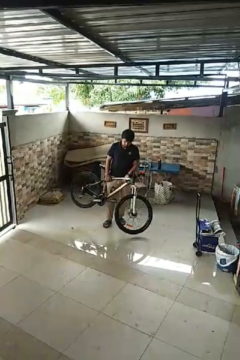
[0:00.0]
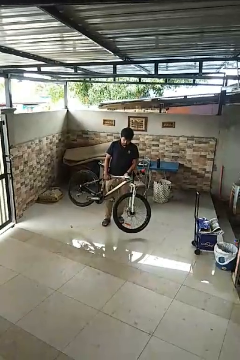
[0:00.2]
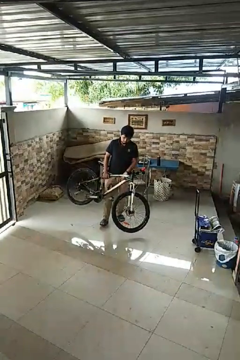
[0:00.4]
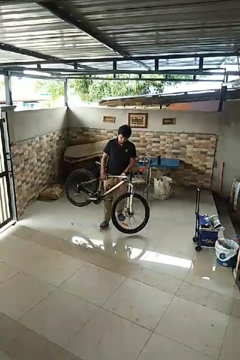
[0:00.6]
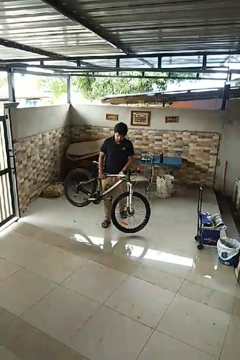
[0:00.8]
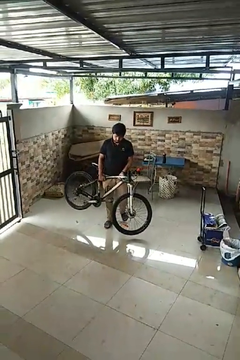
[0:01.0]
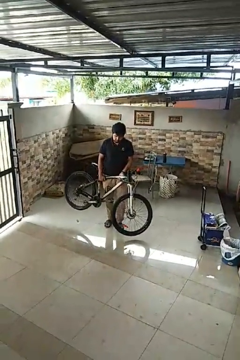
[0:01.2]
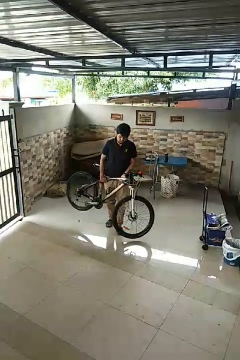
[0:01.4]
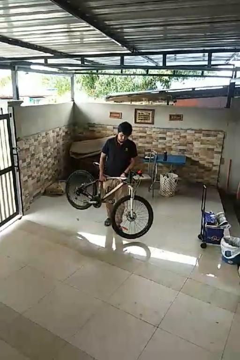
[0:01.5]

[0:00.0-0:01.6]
person carries bicycle

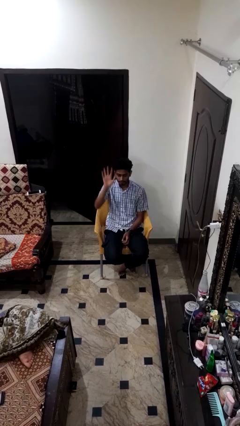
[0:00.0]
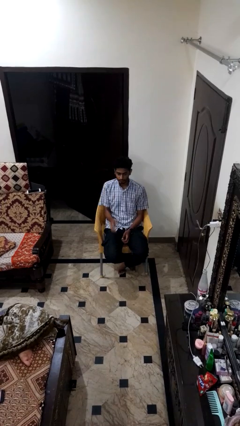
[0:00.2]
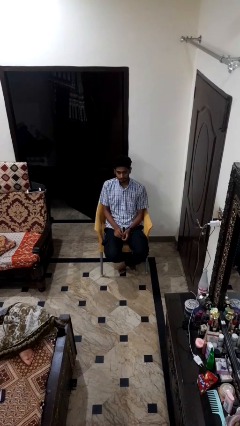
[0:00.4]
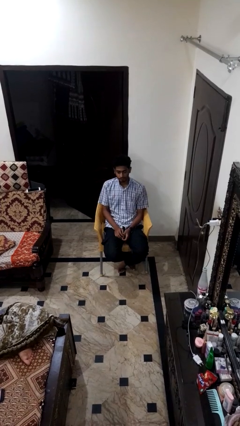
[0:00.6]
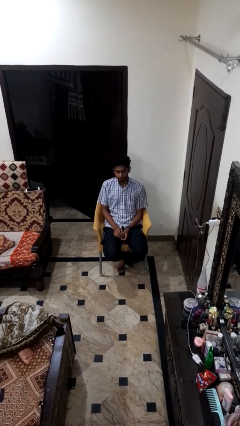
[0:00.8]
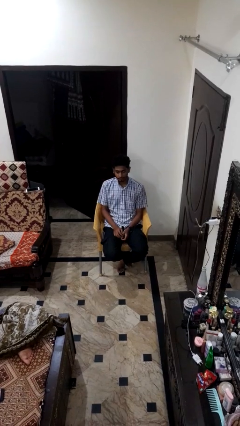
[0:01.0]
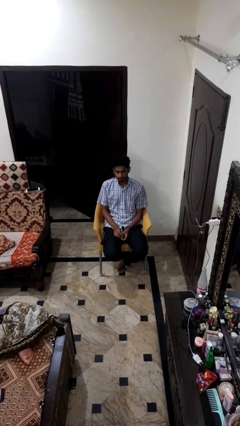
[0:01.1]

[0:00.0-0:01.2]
person gestures lower hand

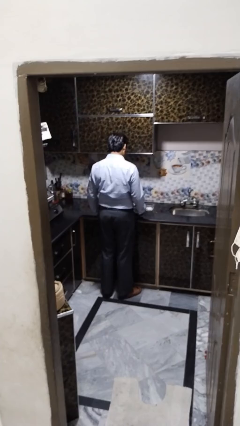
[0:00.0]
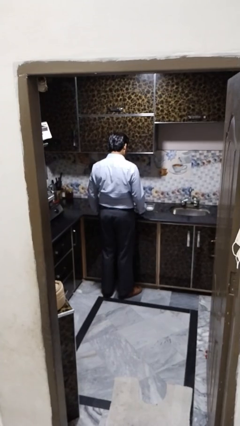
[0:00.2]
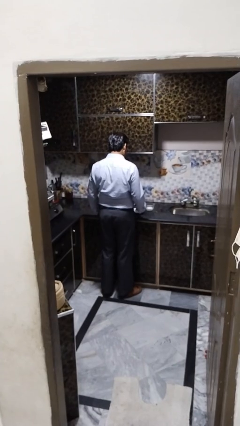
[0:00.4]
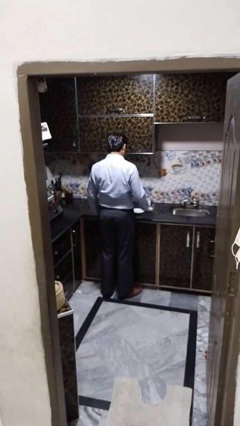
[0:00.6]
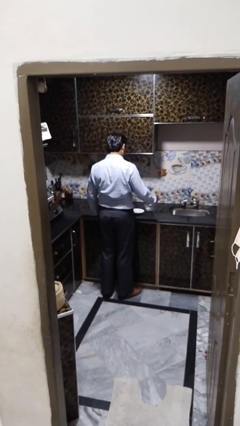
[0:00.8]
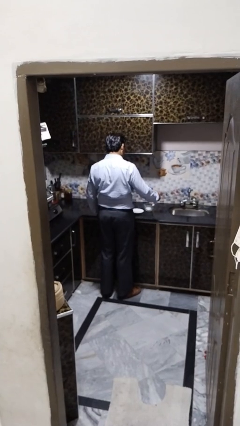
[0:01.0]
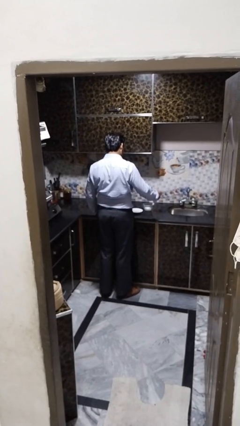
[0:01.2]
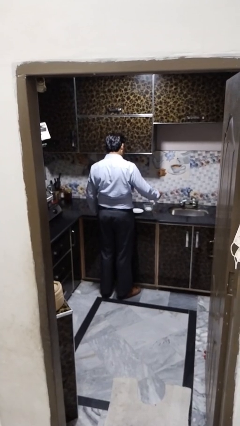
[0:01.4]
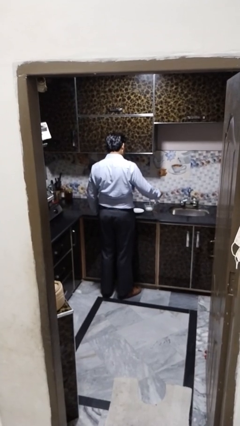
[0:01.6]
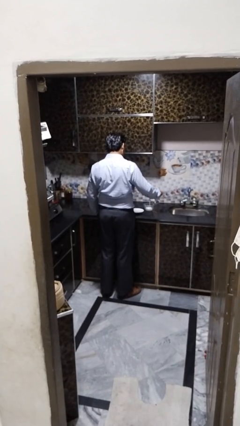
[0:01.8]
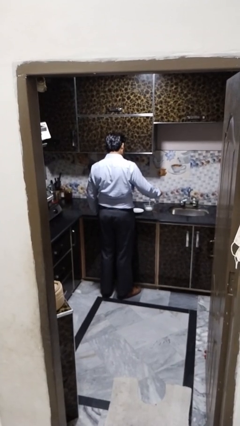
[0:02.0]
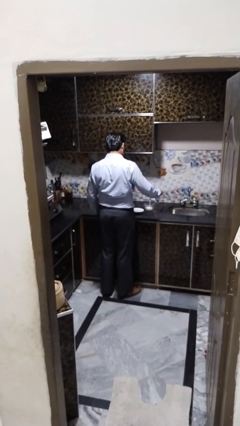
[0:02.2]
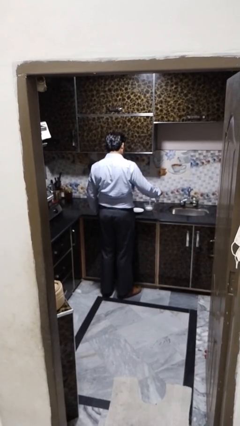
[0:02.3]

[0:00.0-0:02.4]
person pours into bowl

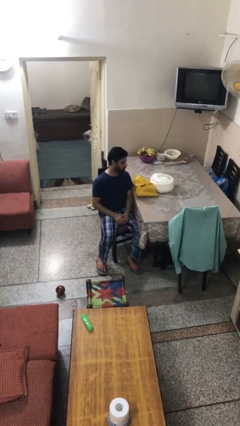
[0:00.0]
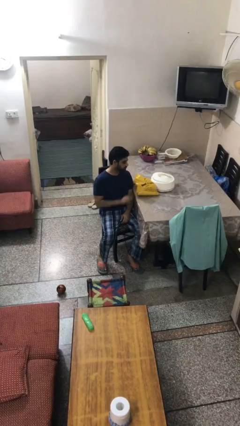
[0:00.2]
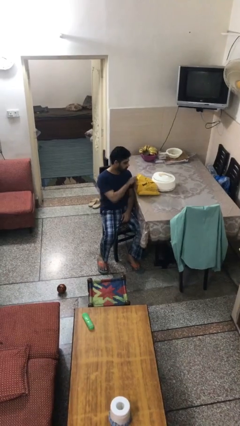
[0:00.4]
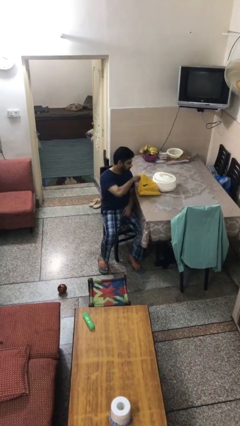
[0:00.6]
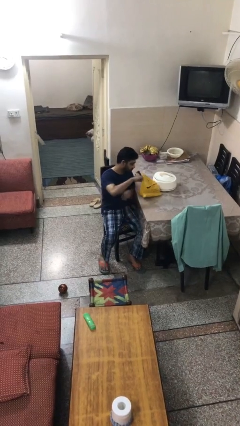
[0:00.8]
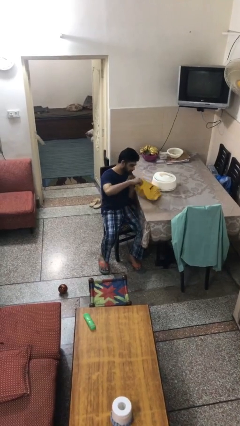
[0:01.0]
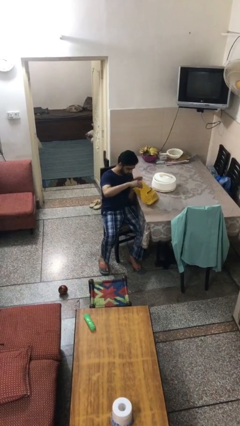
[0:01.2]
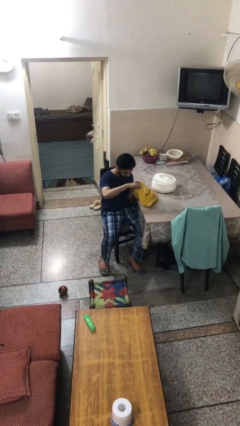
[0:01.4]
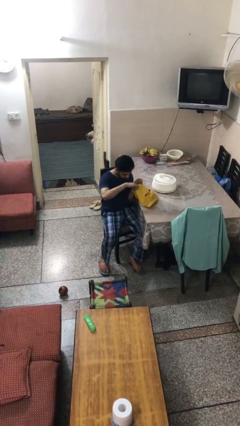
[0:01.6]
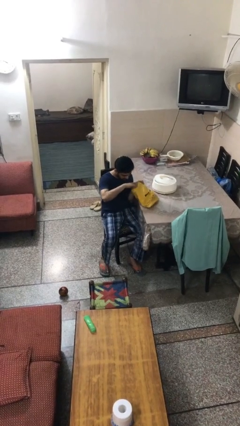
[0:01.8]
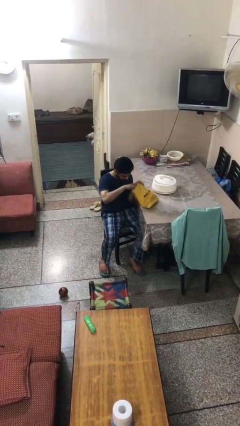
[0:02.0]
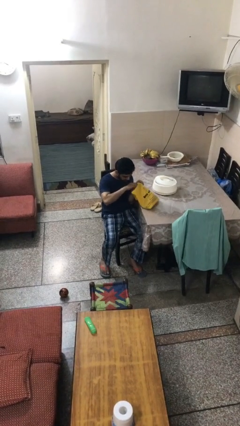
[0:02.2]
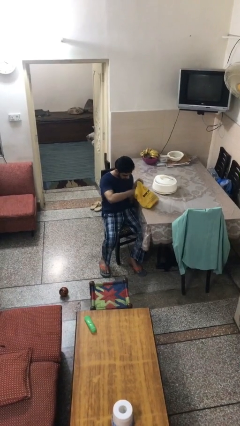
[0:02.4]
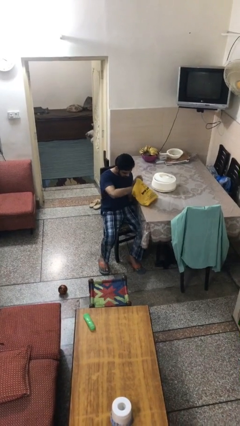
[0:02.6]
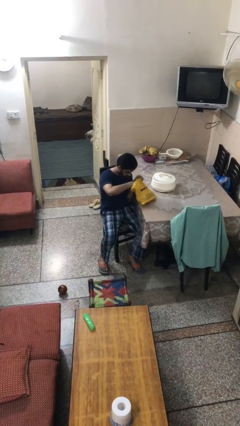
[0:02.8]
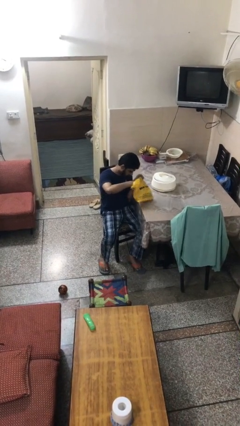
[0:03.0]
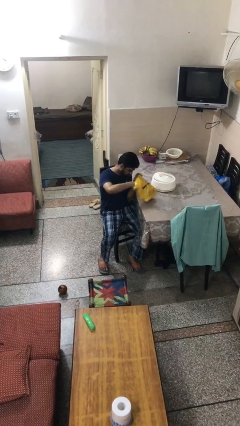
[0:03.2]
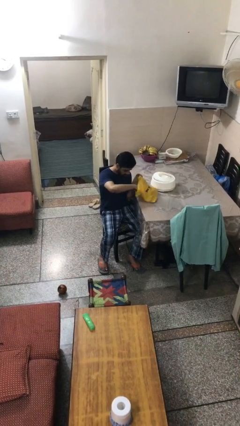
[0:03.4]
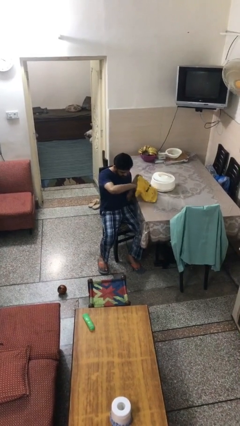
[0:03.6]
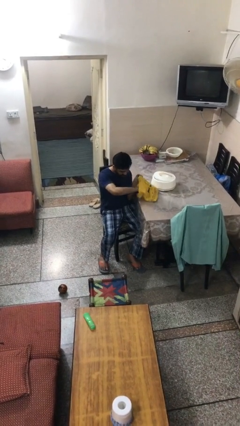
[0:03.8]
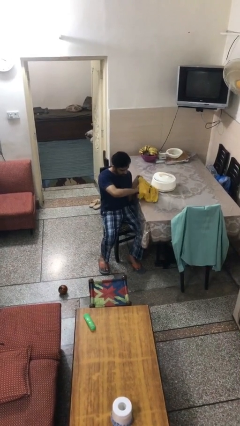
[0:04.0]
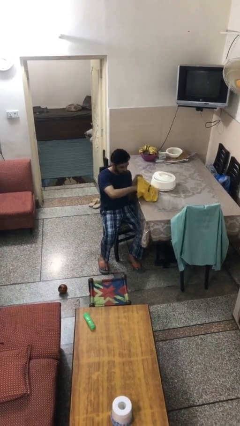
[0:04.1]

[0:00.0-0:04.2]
person searches in bag

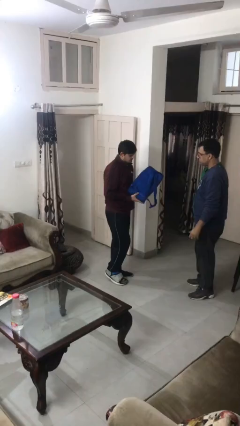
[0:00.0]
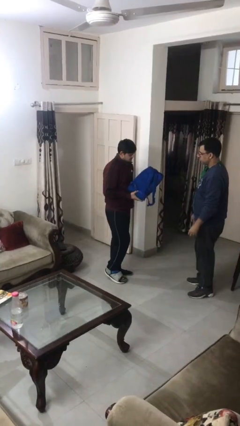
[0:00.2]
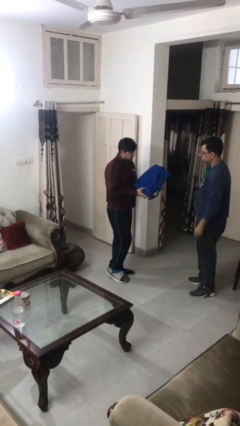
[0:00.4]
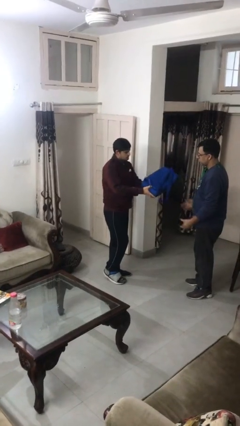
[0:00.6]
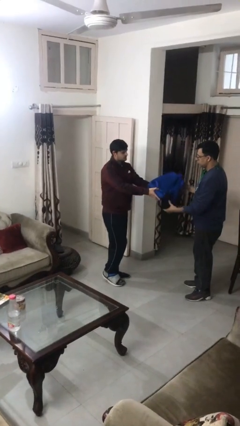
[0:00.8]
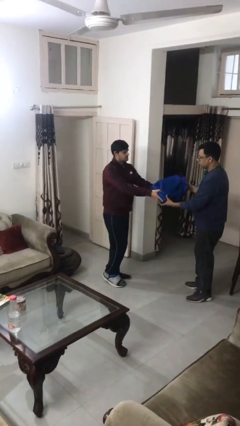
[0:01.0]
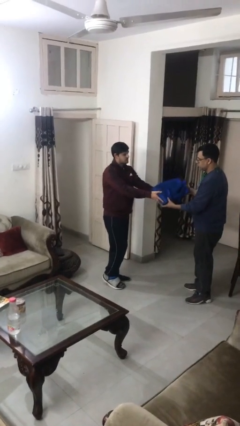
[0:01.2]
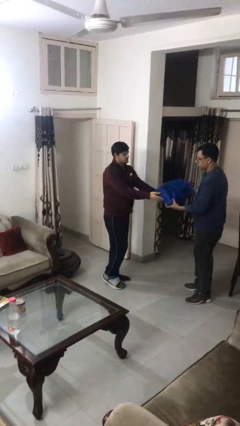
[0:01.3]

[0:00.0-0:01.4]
person transfers object to person

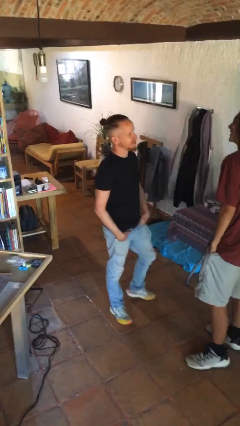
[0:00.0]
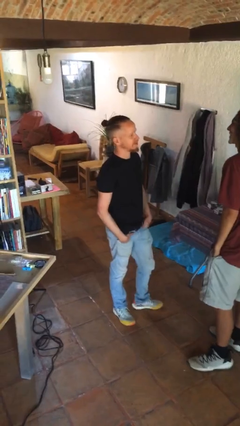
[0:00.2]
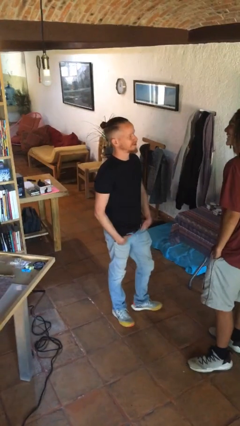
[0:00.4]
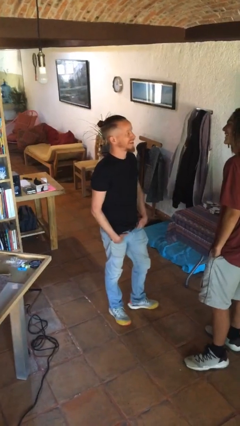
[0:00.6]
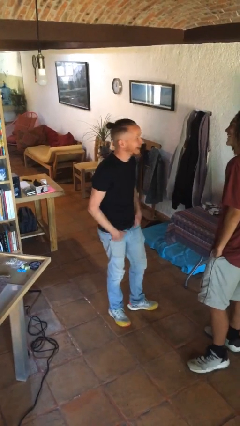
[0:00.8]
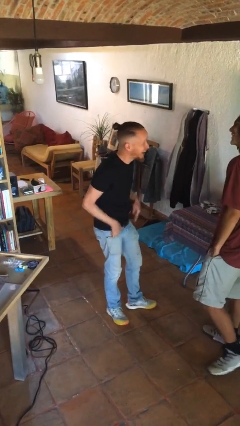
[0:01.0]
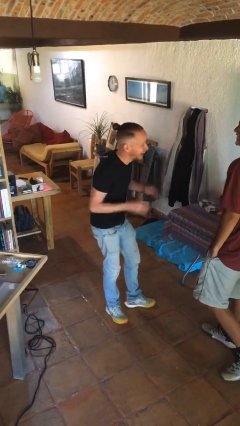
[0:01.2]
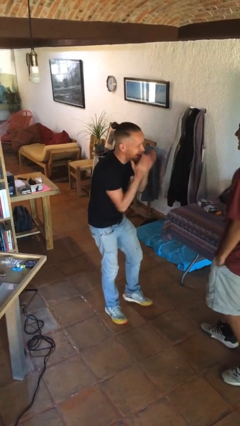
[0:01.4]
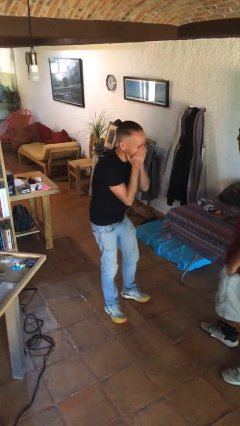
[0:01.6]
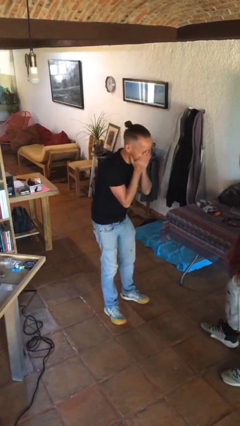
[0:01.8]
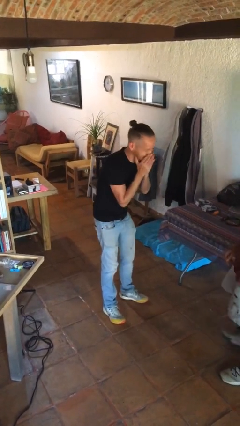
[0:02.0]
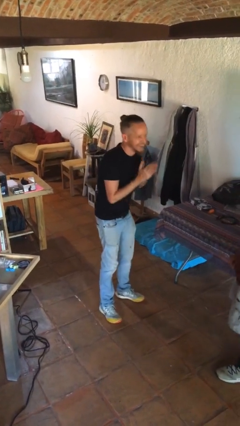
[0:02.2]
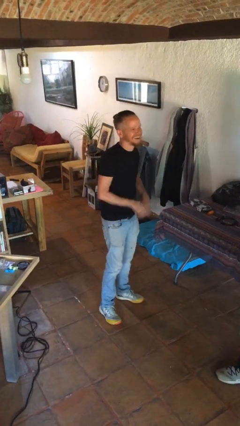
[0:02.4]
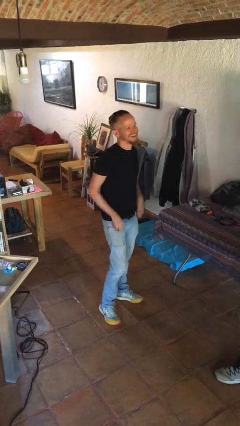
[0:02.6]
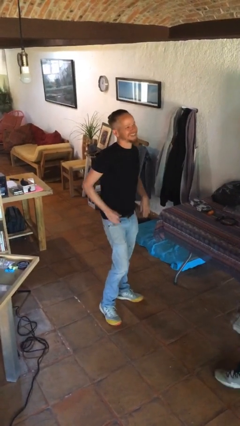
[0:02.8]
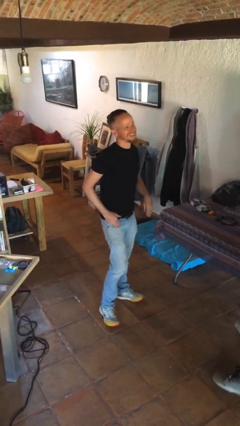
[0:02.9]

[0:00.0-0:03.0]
person laughs with person

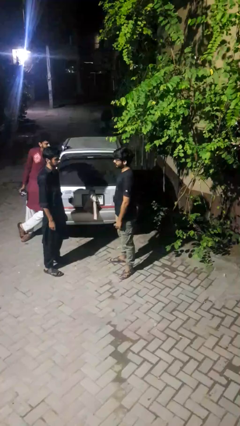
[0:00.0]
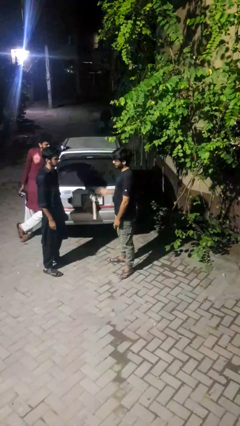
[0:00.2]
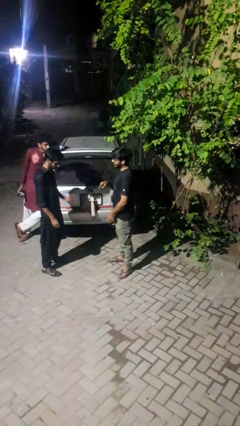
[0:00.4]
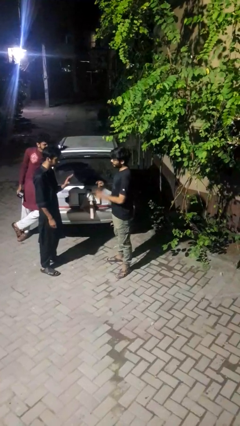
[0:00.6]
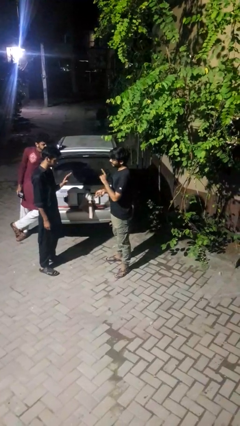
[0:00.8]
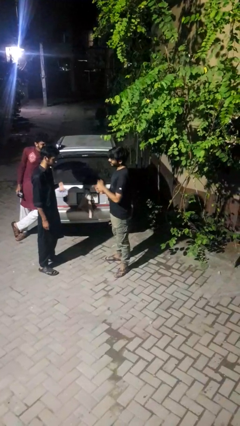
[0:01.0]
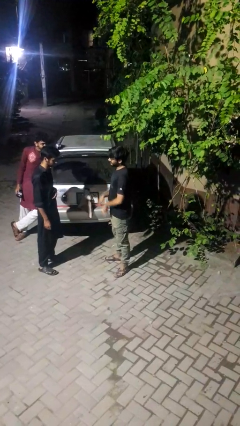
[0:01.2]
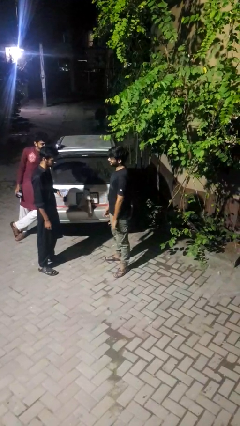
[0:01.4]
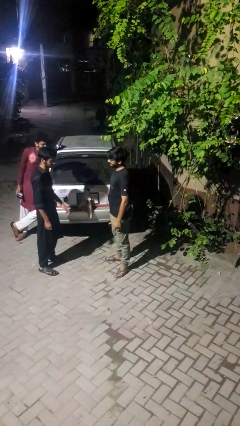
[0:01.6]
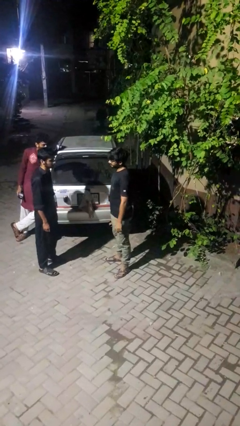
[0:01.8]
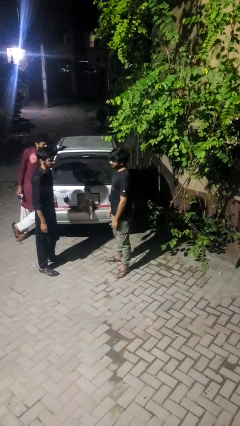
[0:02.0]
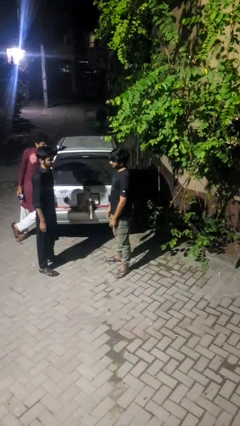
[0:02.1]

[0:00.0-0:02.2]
person talks to person

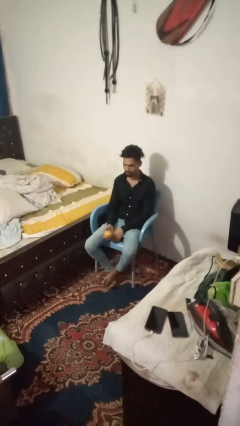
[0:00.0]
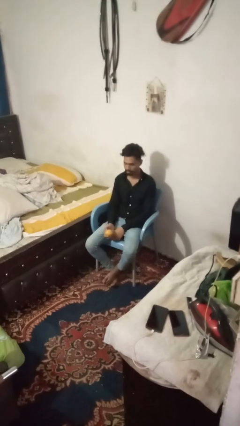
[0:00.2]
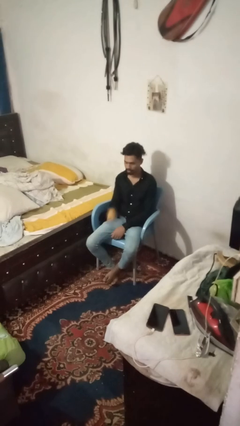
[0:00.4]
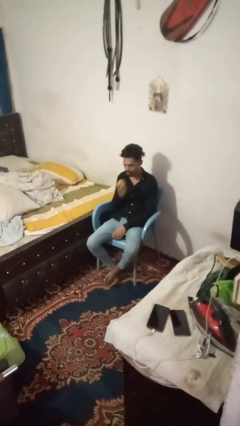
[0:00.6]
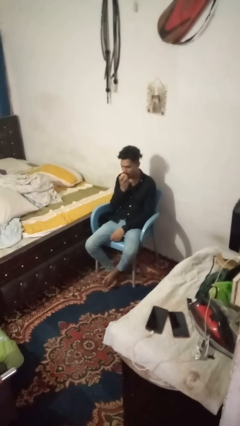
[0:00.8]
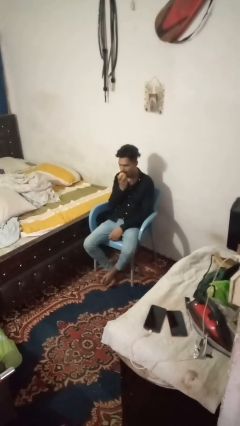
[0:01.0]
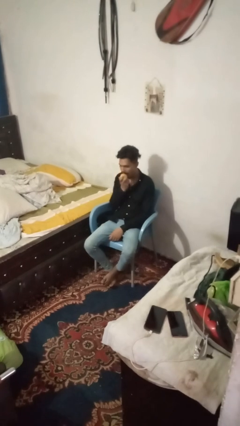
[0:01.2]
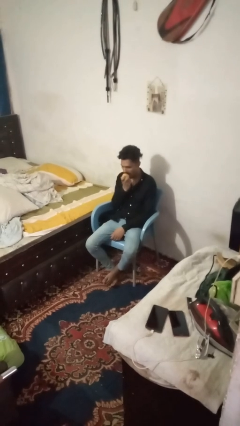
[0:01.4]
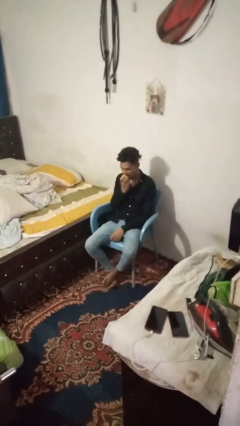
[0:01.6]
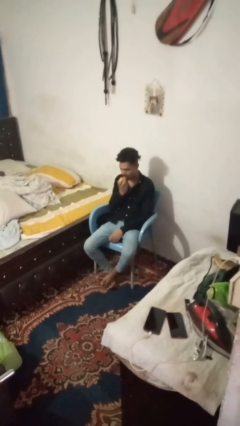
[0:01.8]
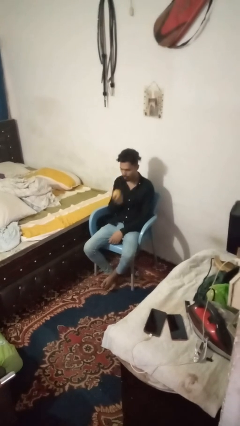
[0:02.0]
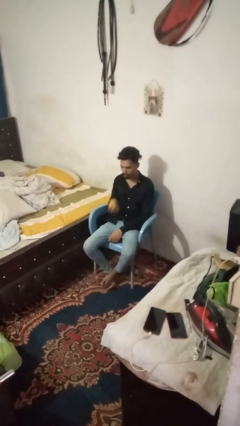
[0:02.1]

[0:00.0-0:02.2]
person eats apple
